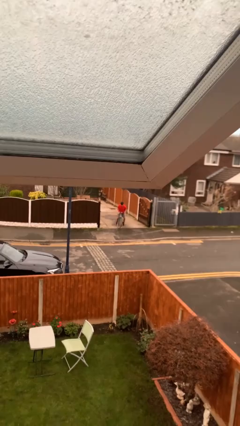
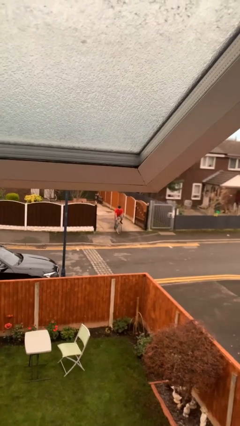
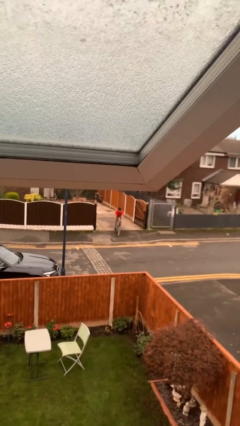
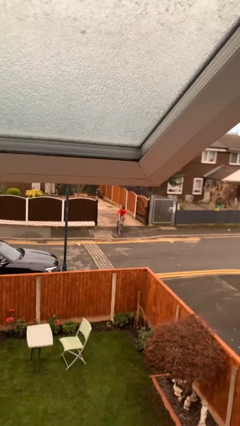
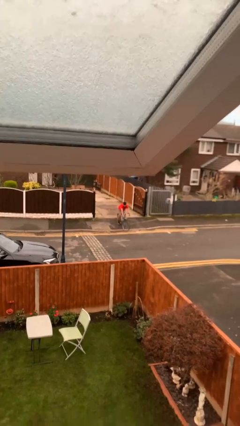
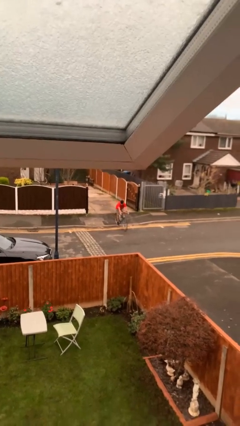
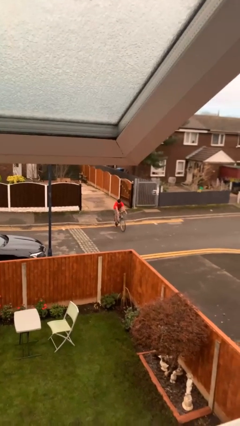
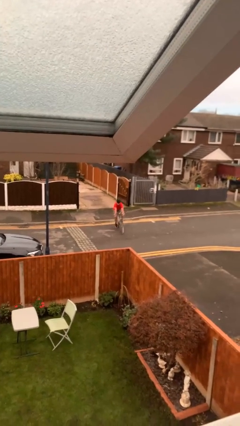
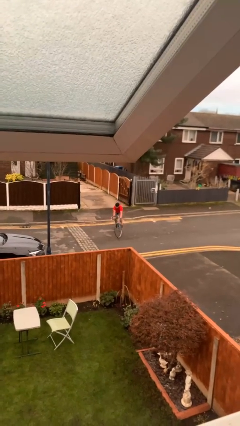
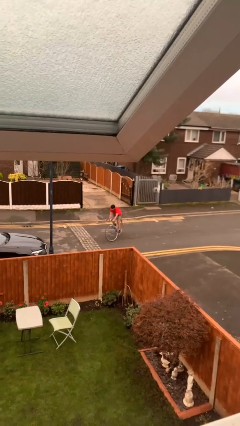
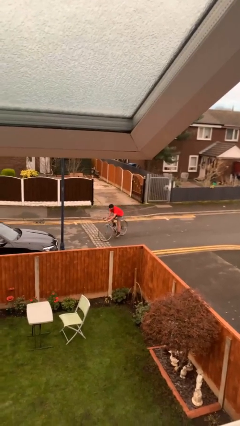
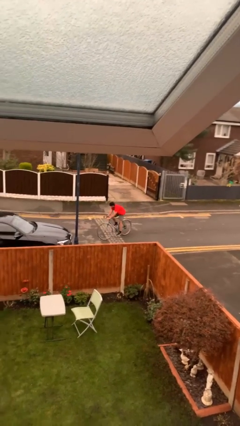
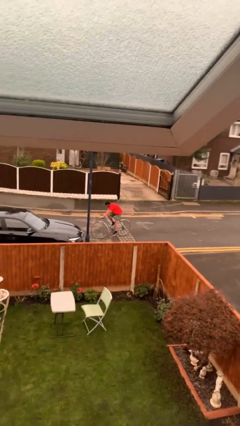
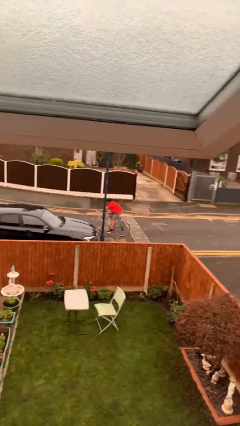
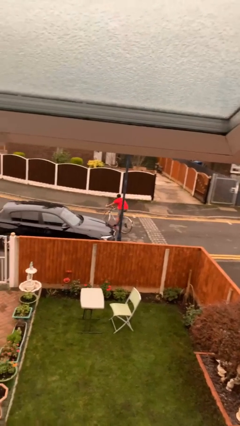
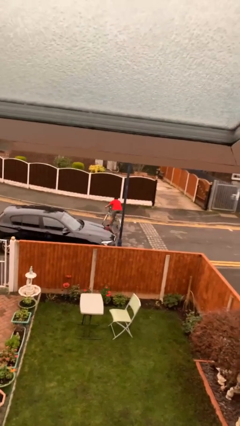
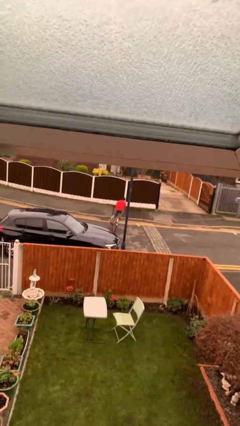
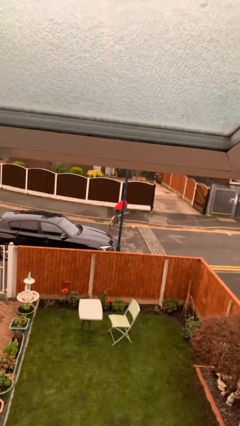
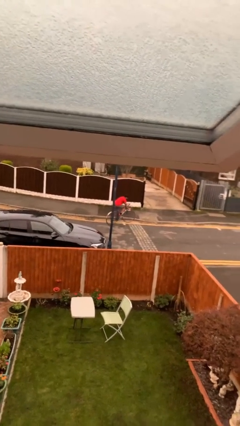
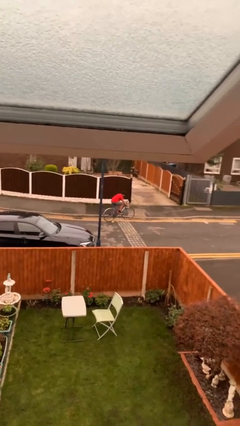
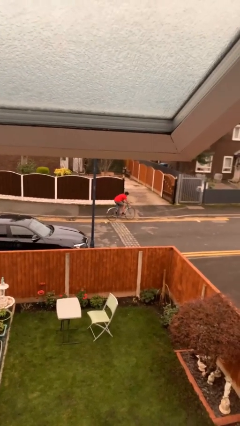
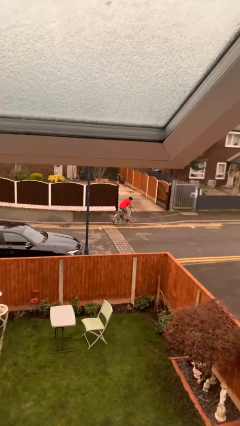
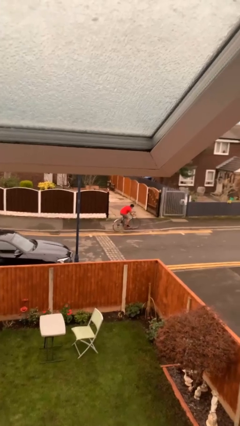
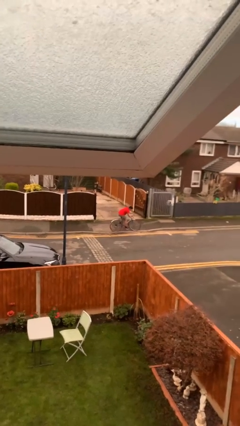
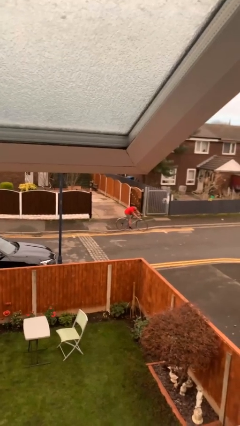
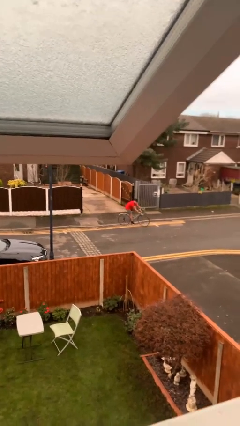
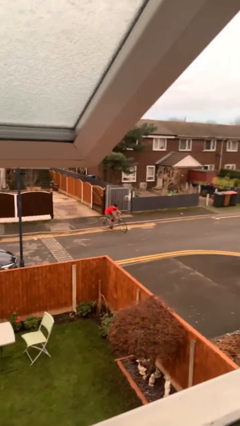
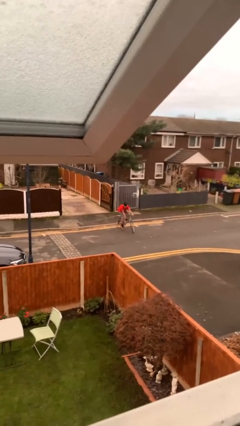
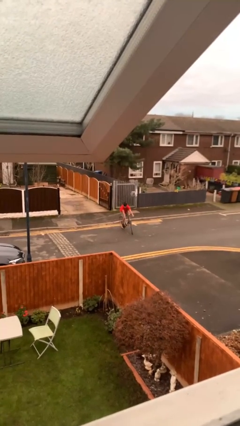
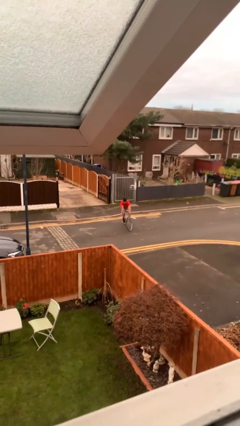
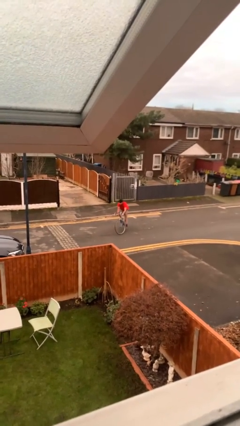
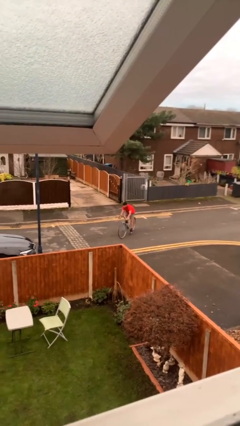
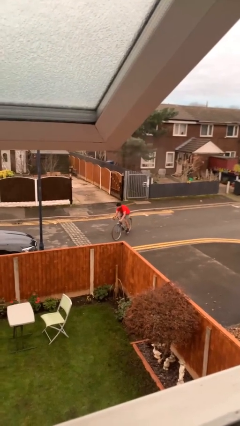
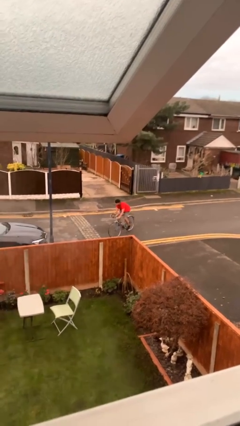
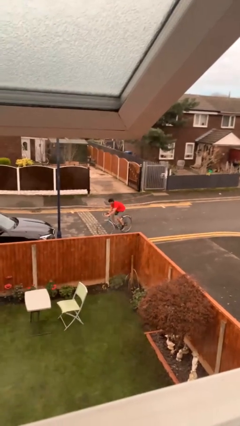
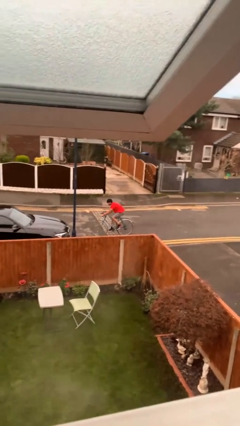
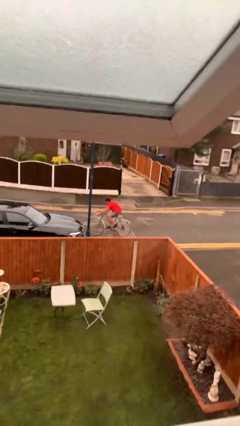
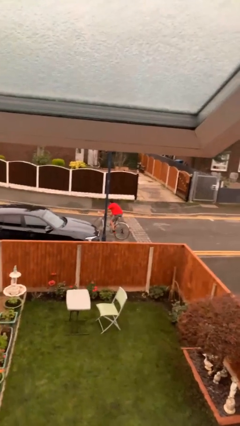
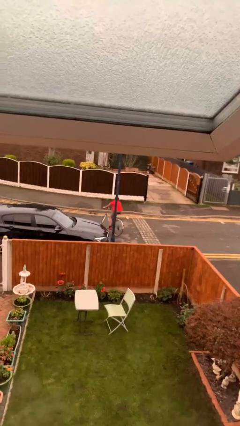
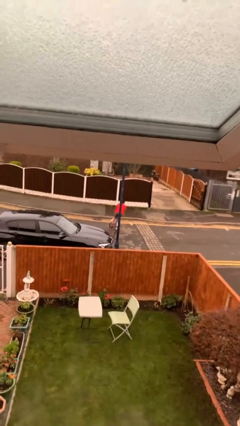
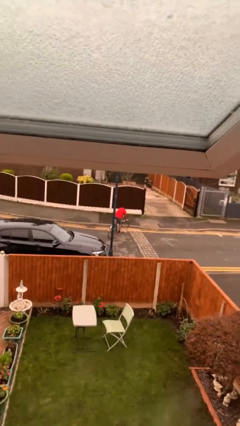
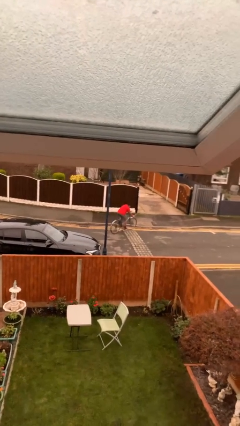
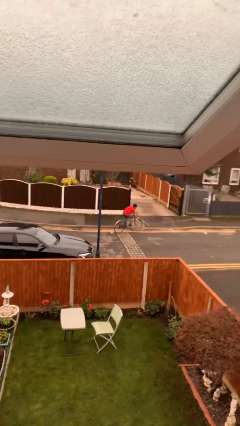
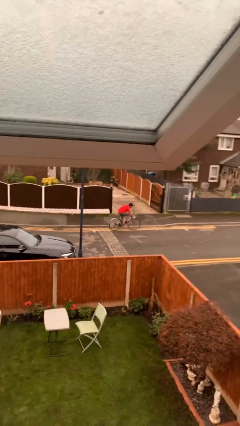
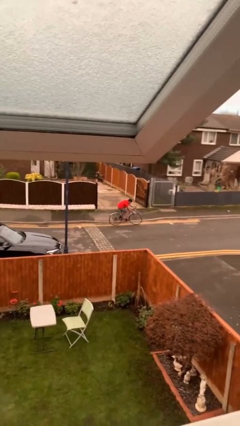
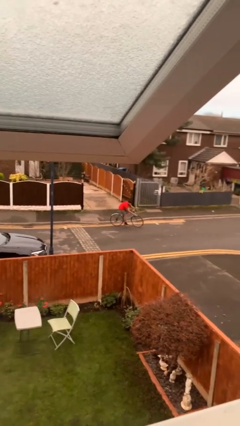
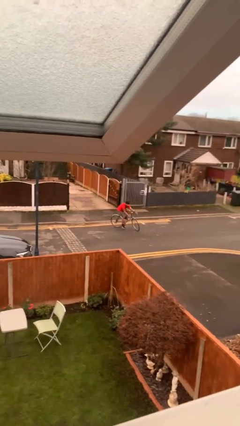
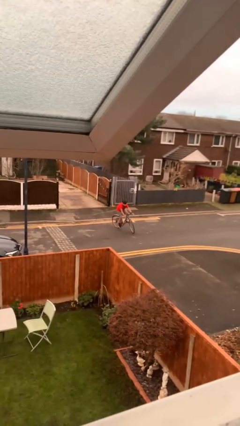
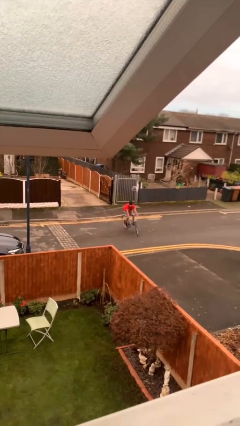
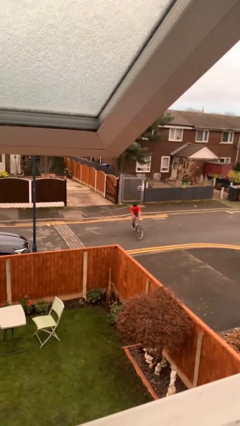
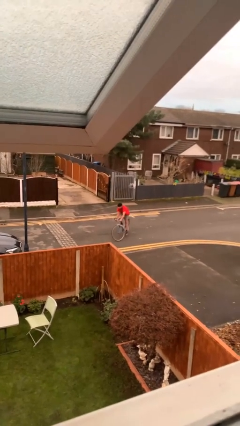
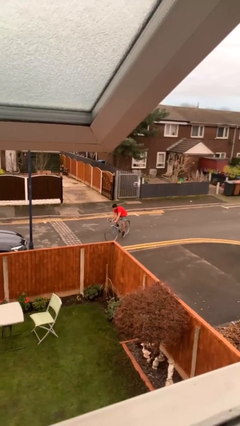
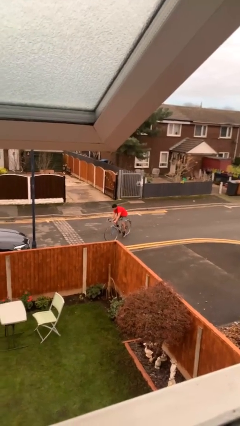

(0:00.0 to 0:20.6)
person rides bicycle

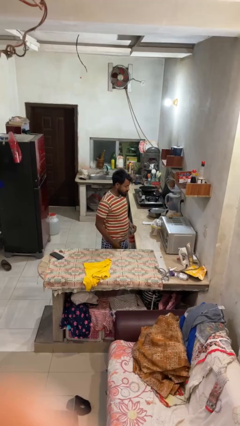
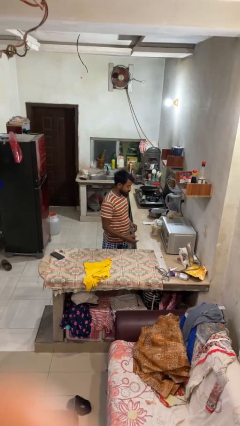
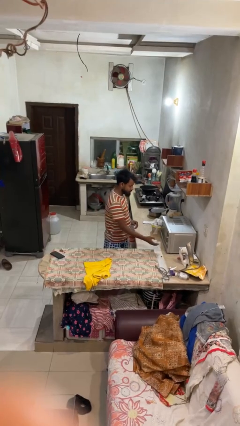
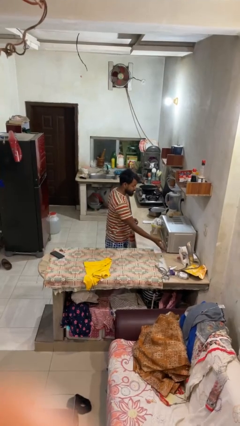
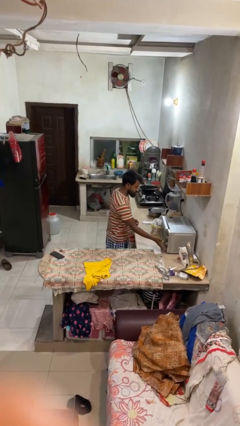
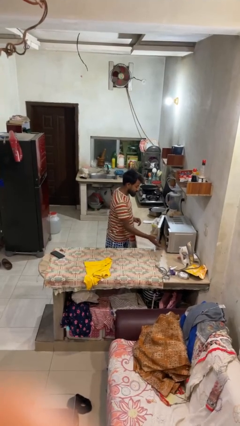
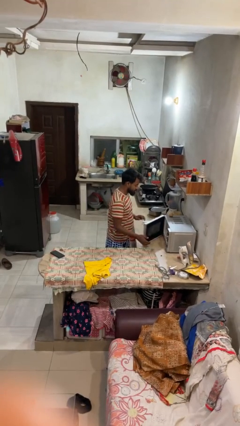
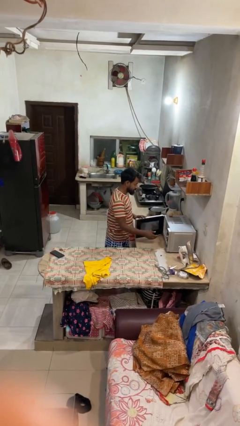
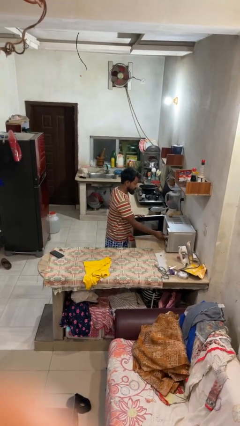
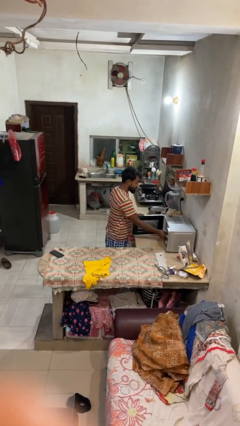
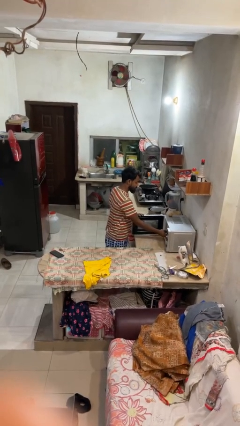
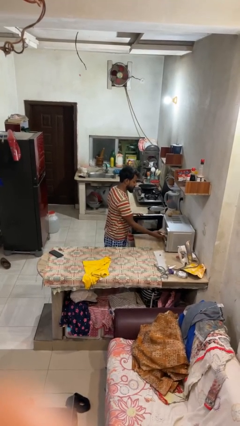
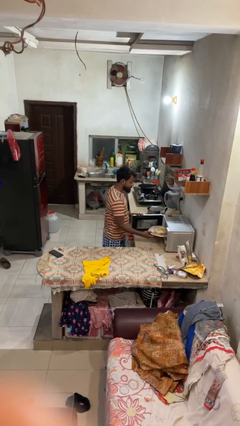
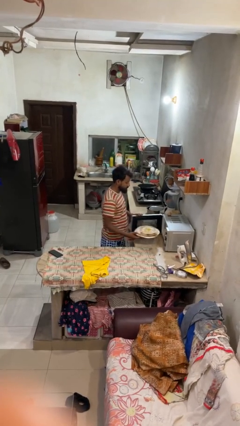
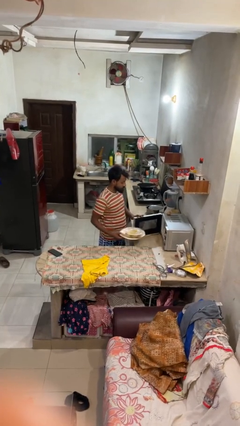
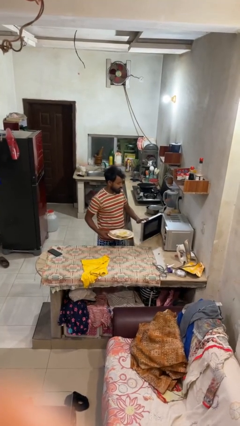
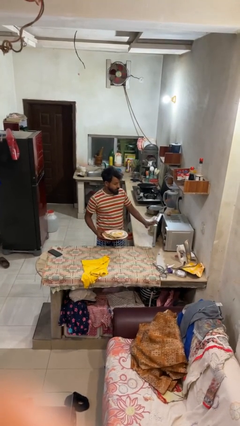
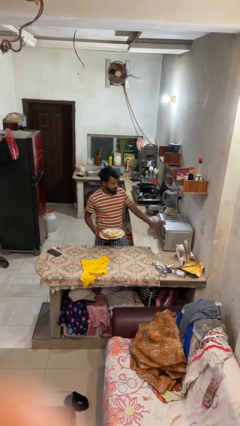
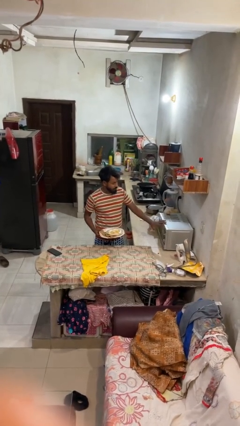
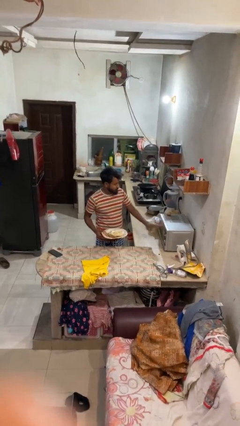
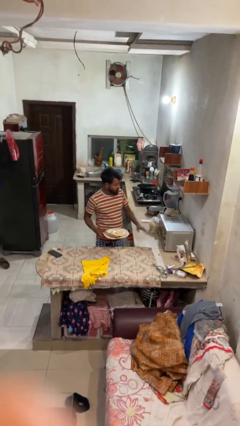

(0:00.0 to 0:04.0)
person takes object from microwave

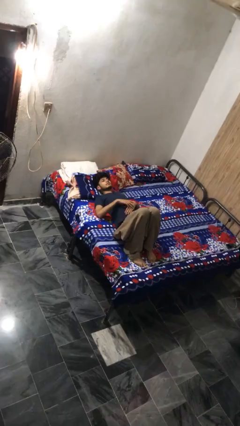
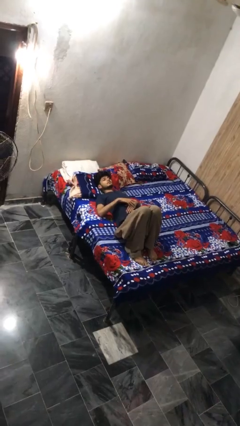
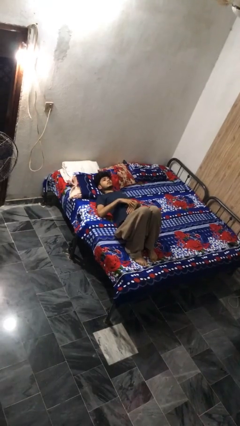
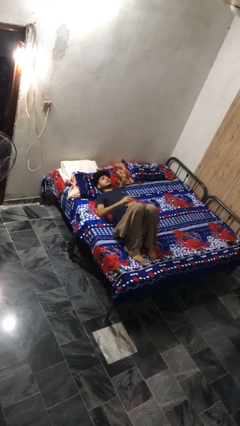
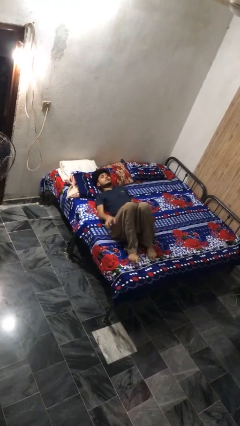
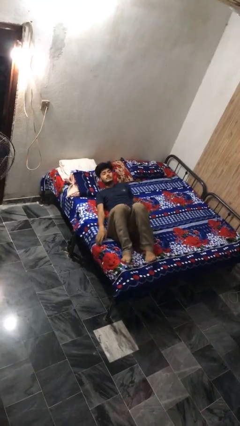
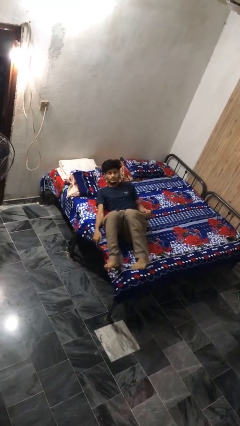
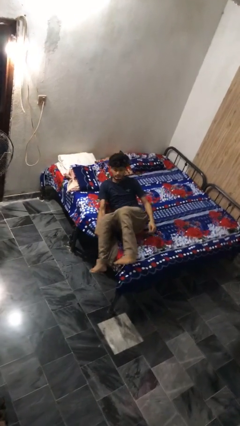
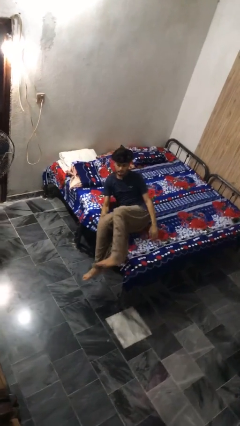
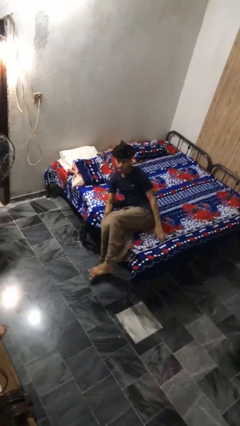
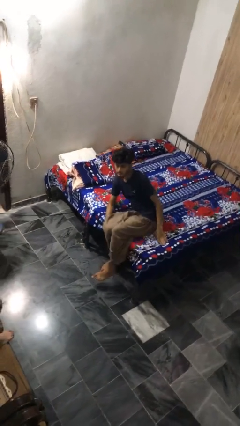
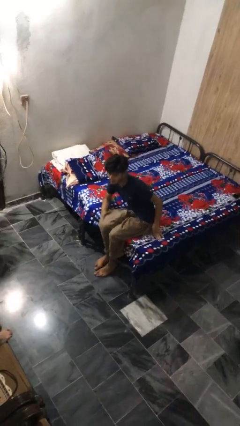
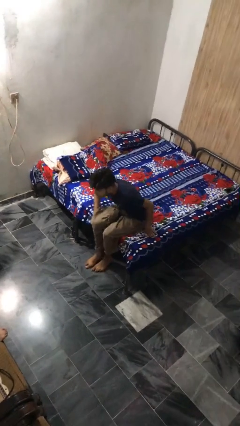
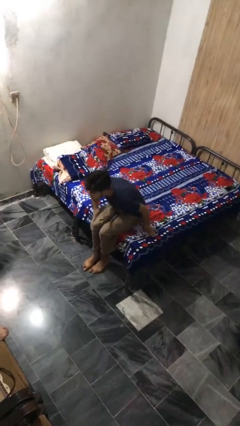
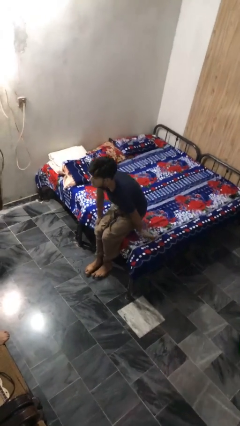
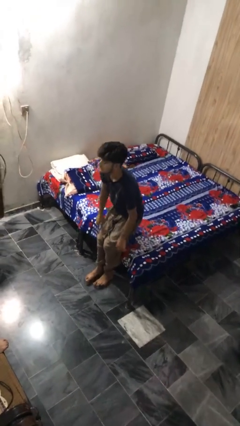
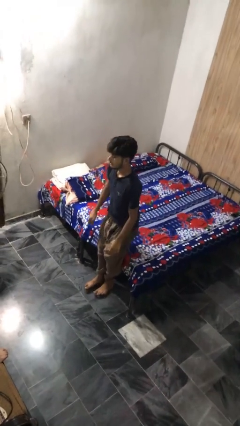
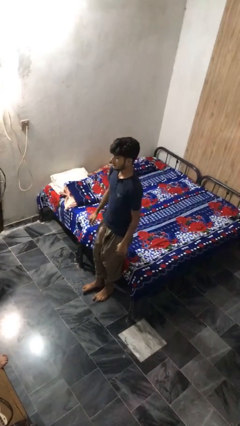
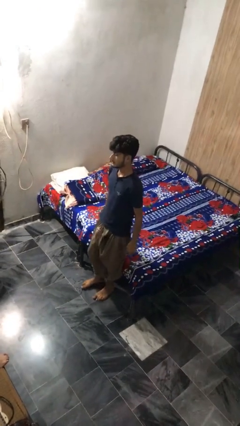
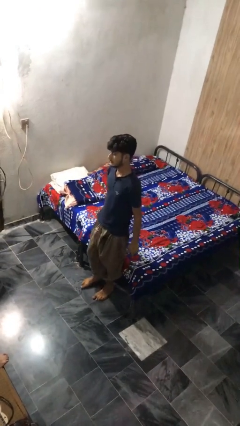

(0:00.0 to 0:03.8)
person stands up
